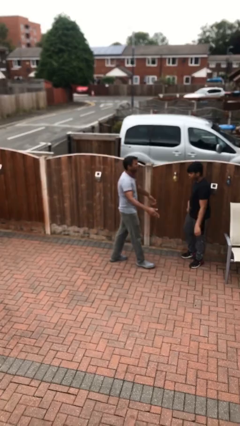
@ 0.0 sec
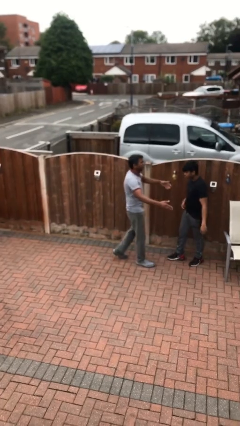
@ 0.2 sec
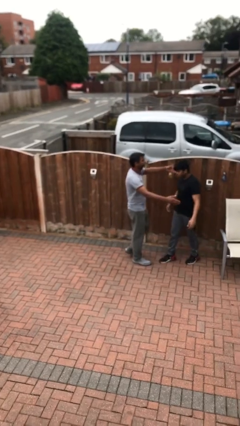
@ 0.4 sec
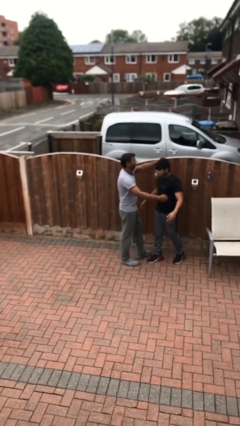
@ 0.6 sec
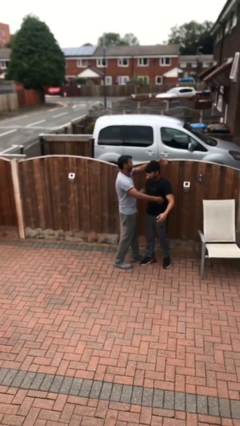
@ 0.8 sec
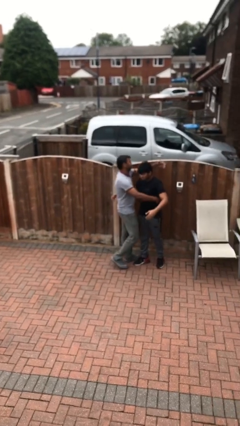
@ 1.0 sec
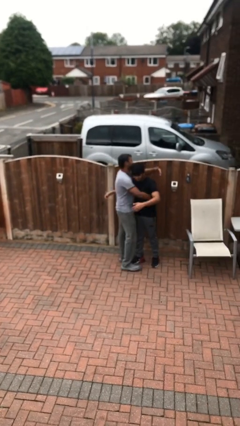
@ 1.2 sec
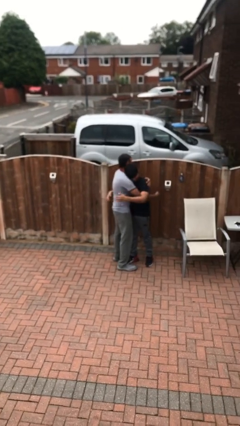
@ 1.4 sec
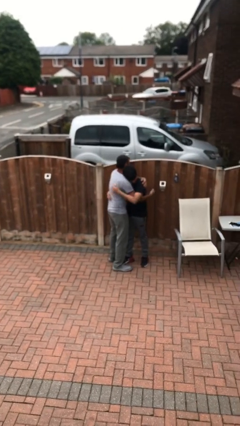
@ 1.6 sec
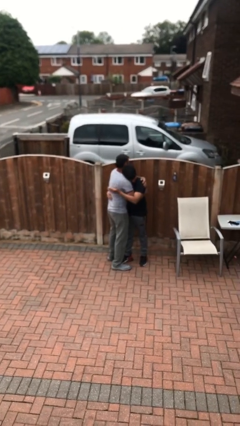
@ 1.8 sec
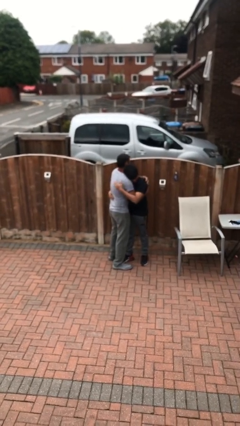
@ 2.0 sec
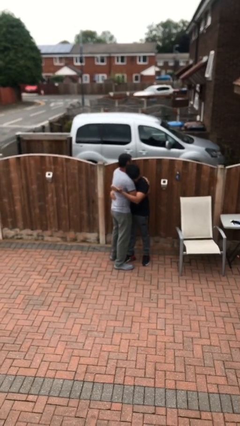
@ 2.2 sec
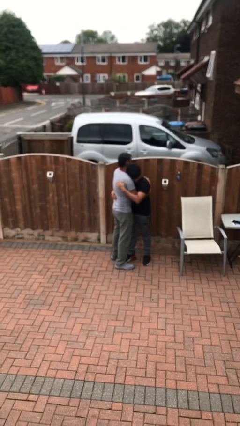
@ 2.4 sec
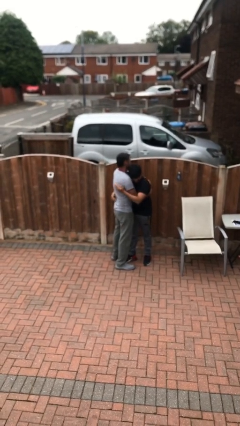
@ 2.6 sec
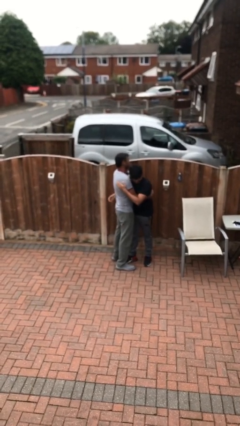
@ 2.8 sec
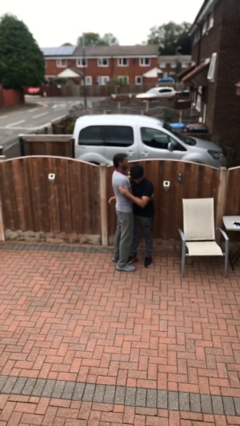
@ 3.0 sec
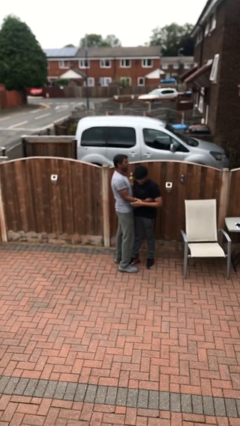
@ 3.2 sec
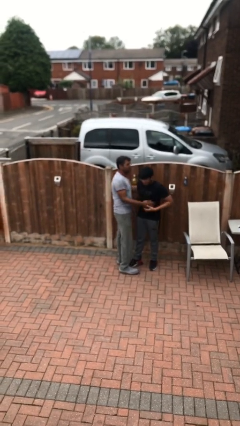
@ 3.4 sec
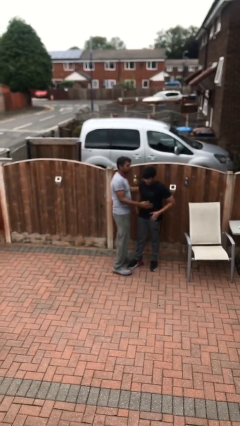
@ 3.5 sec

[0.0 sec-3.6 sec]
person embraces person

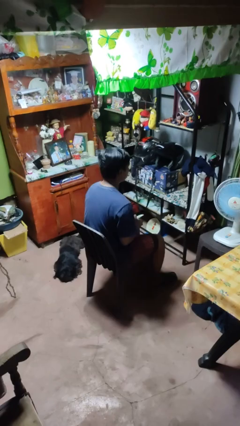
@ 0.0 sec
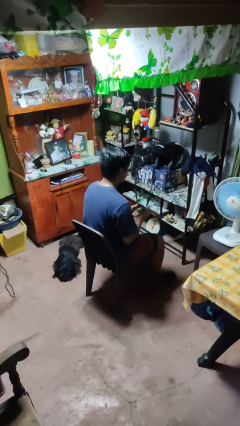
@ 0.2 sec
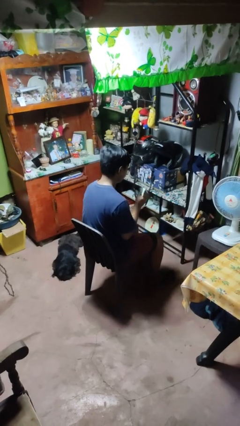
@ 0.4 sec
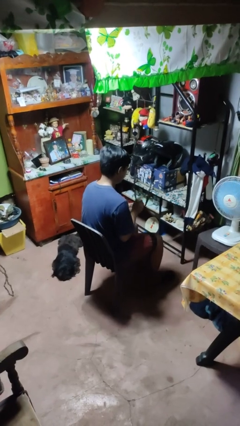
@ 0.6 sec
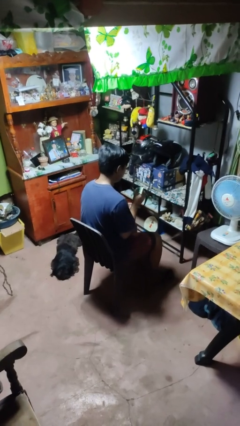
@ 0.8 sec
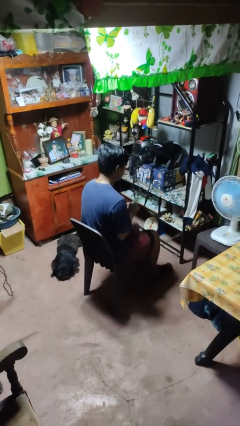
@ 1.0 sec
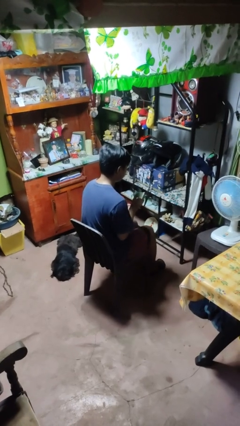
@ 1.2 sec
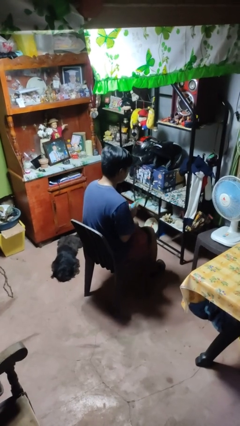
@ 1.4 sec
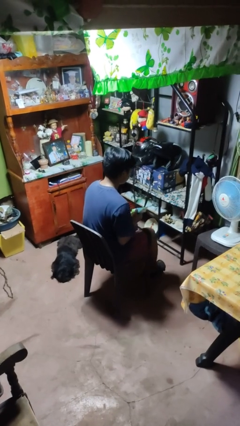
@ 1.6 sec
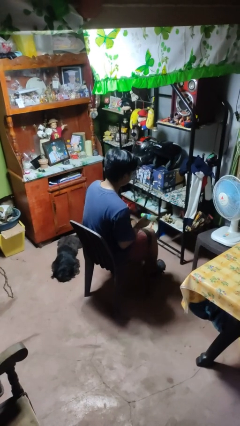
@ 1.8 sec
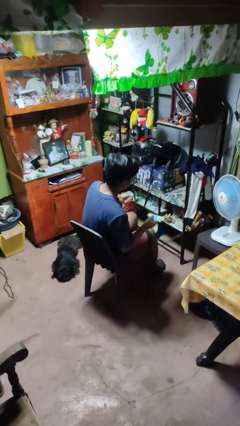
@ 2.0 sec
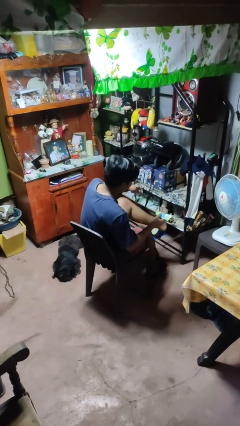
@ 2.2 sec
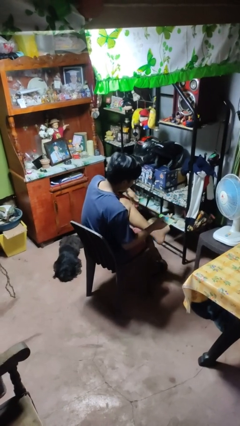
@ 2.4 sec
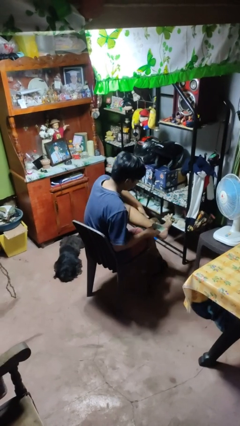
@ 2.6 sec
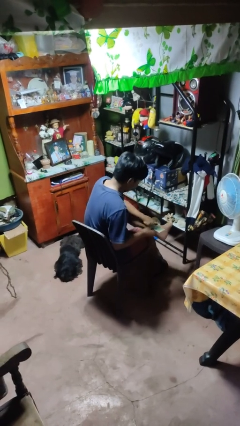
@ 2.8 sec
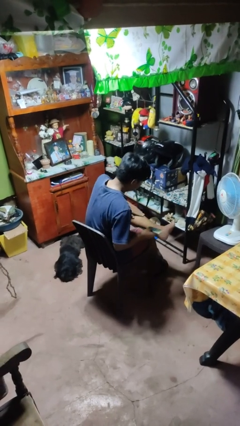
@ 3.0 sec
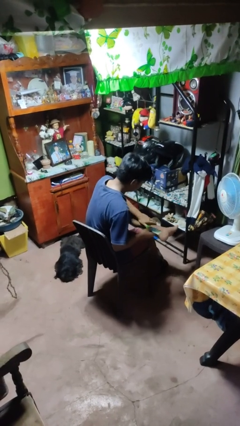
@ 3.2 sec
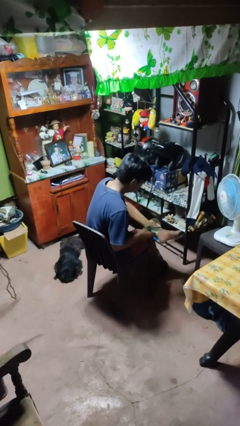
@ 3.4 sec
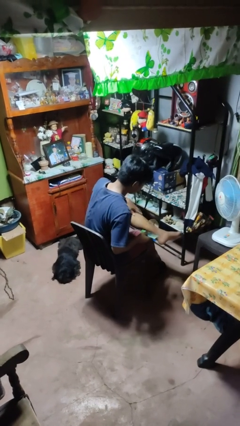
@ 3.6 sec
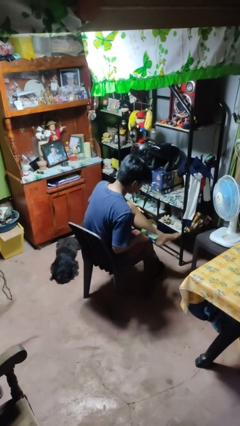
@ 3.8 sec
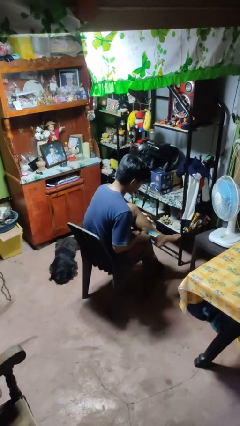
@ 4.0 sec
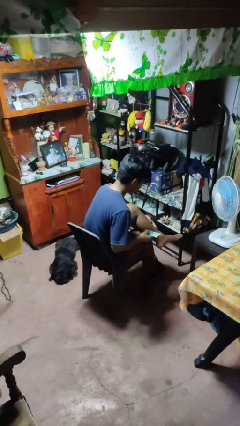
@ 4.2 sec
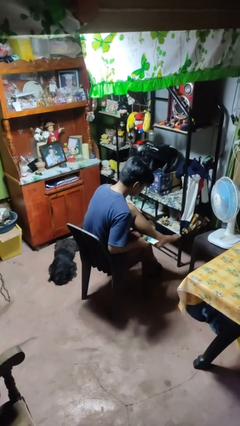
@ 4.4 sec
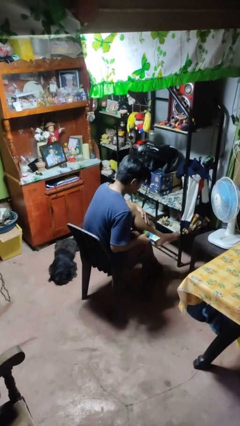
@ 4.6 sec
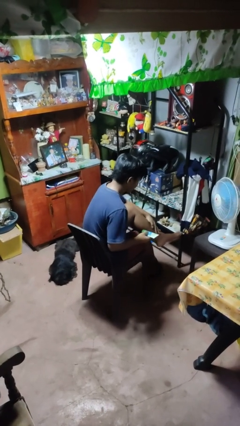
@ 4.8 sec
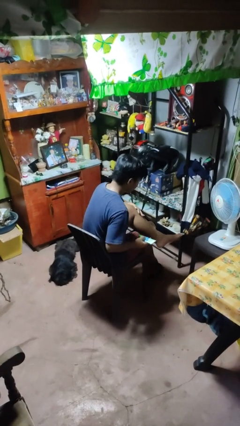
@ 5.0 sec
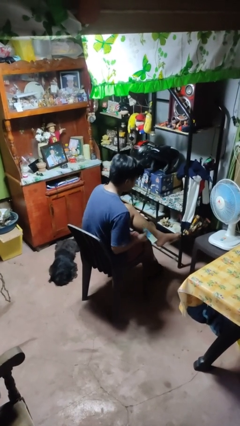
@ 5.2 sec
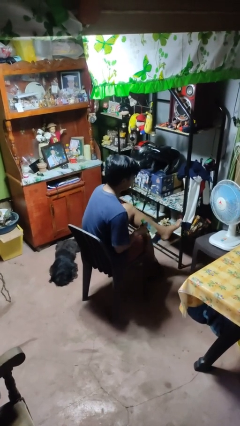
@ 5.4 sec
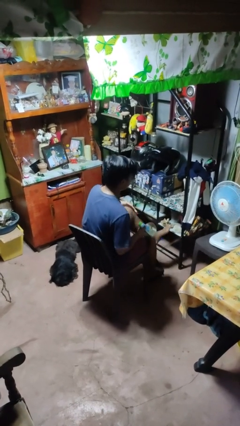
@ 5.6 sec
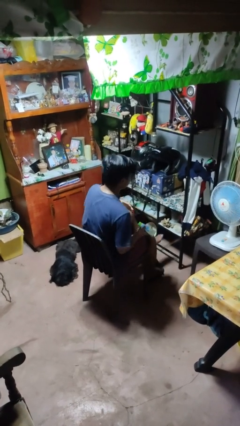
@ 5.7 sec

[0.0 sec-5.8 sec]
person applies sunscreen

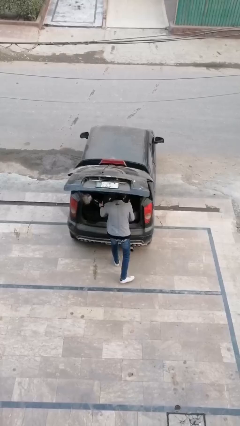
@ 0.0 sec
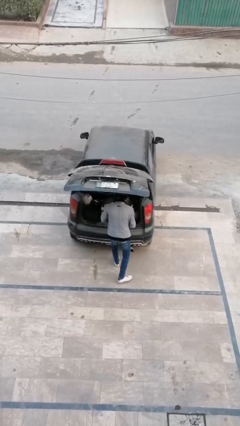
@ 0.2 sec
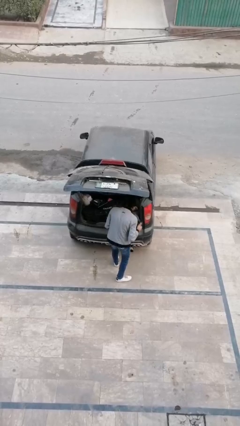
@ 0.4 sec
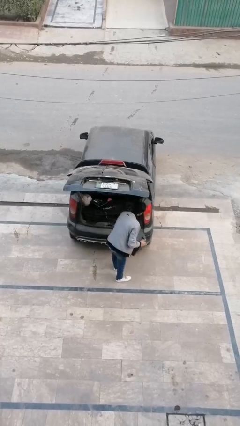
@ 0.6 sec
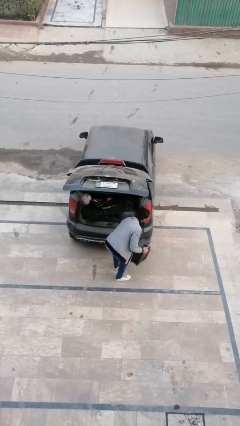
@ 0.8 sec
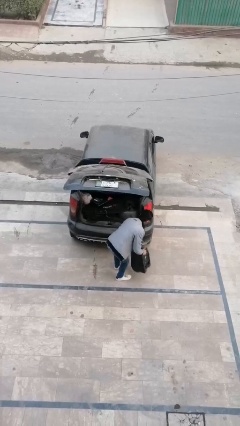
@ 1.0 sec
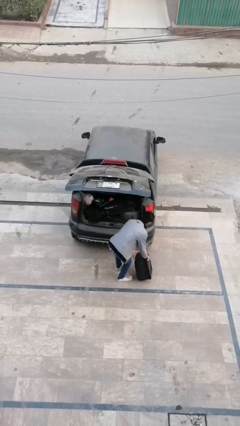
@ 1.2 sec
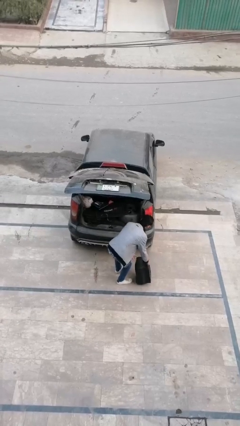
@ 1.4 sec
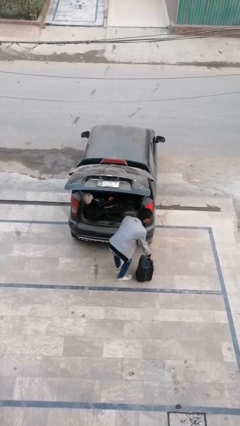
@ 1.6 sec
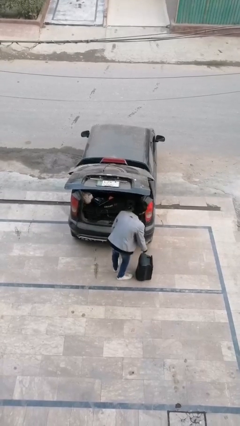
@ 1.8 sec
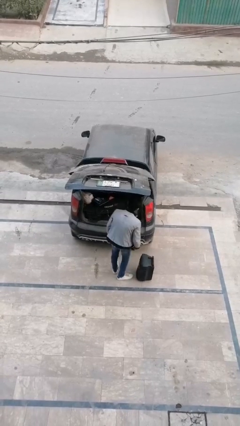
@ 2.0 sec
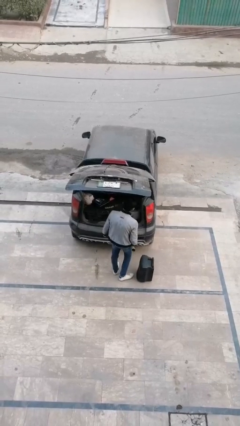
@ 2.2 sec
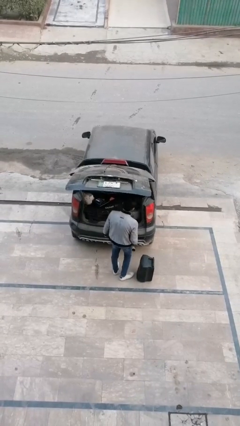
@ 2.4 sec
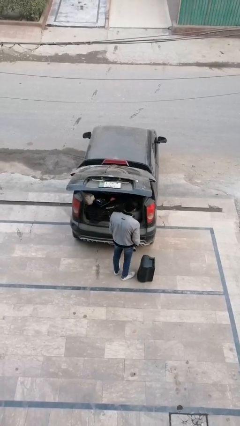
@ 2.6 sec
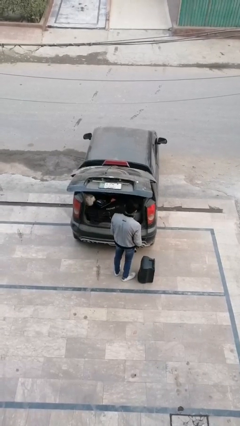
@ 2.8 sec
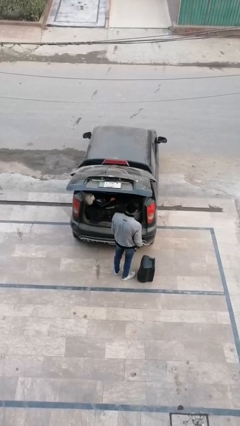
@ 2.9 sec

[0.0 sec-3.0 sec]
person unloads car

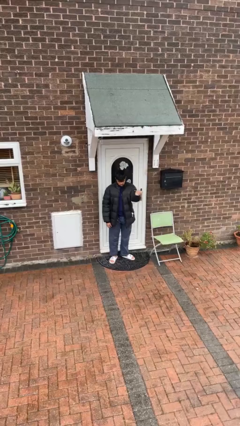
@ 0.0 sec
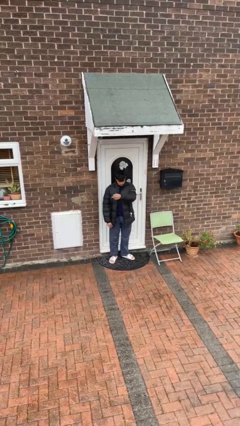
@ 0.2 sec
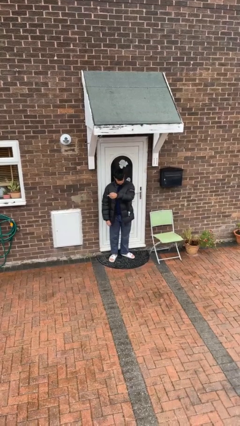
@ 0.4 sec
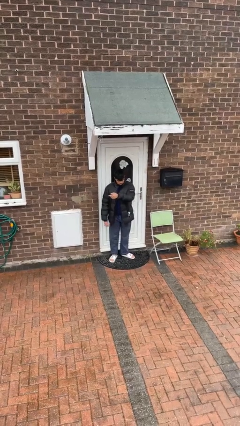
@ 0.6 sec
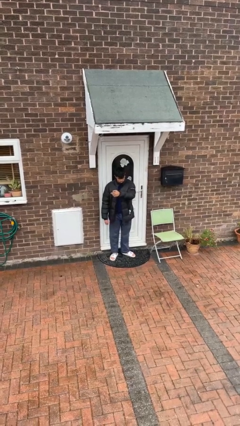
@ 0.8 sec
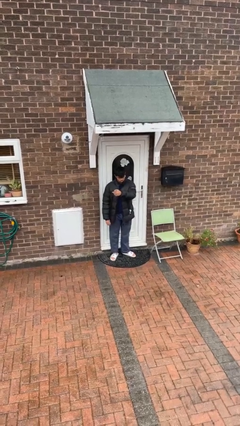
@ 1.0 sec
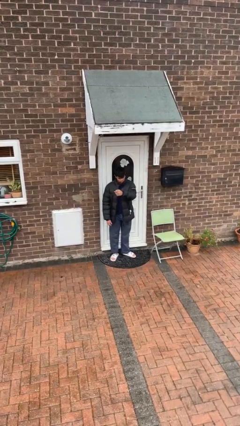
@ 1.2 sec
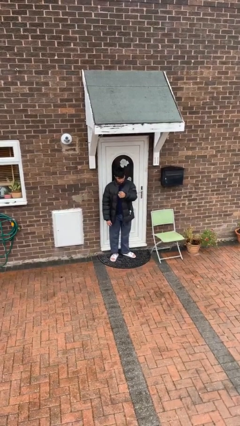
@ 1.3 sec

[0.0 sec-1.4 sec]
person gestures swipe right

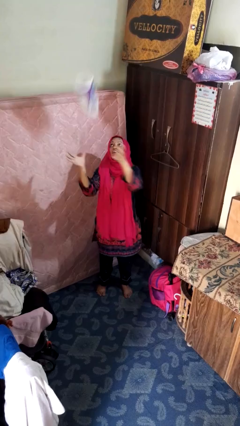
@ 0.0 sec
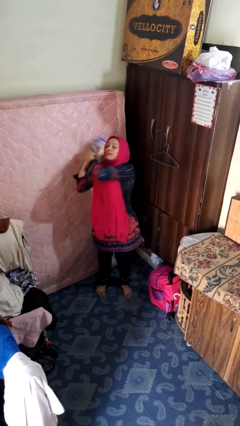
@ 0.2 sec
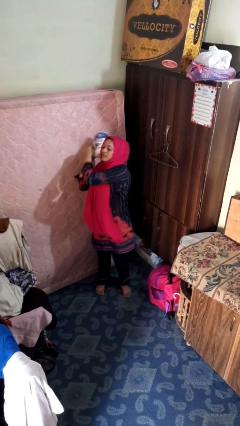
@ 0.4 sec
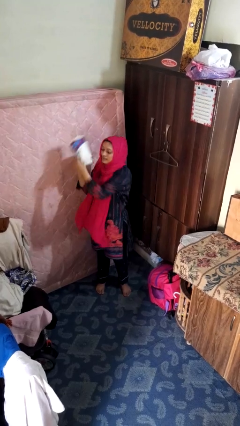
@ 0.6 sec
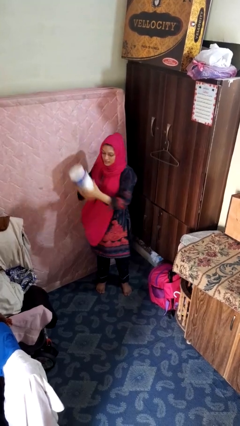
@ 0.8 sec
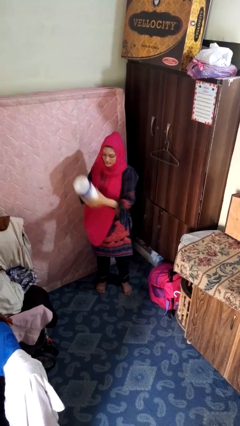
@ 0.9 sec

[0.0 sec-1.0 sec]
person catches dropped object

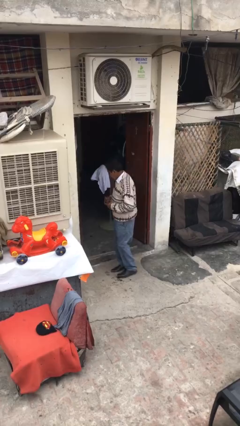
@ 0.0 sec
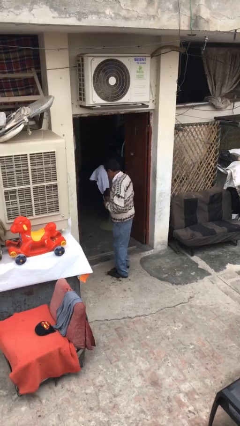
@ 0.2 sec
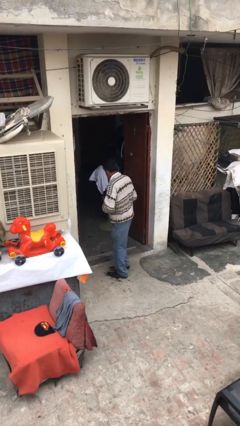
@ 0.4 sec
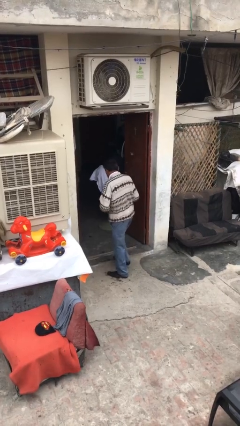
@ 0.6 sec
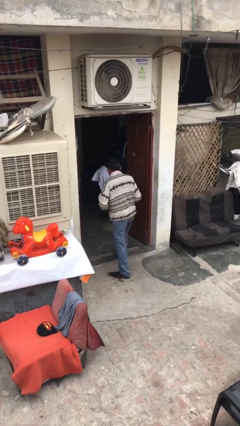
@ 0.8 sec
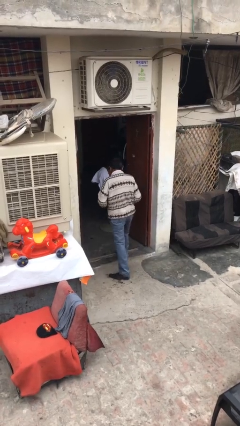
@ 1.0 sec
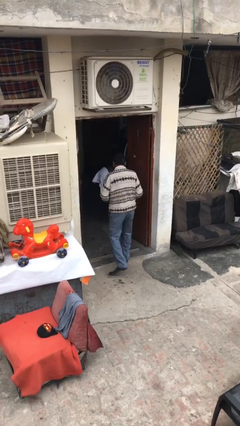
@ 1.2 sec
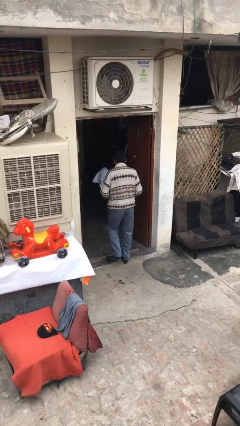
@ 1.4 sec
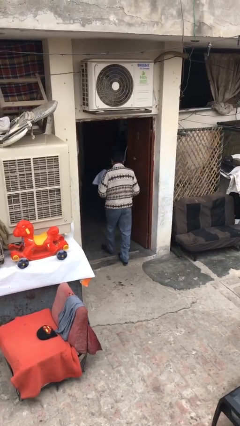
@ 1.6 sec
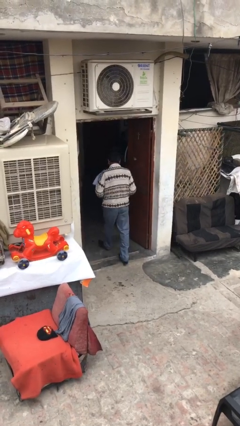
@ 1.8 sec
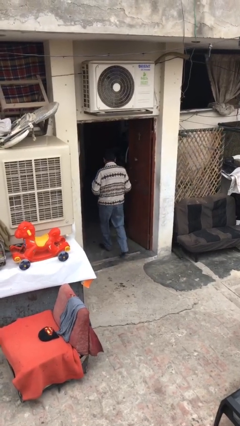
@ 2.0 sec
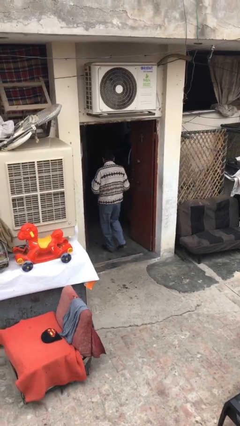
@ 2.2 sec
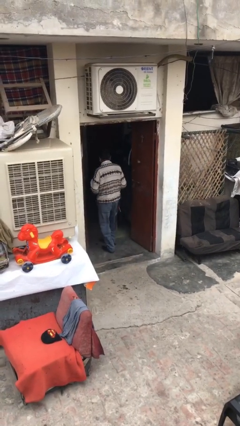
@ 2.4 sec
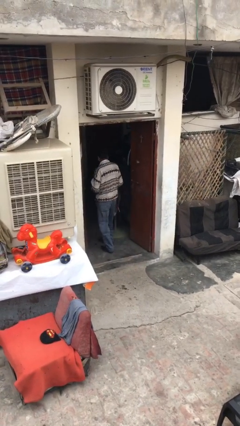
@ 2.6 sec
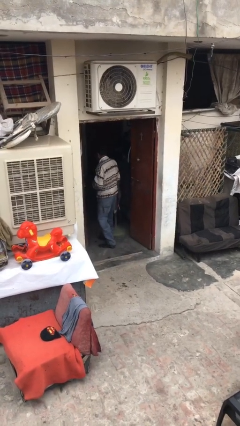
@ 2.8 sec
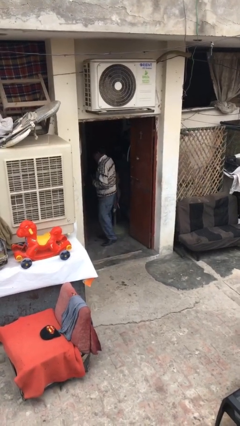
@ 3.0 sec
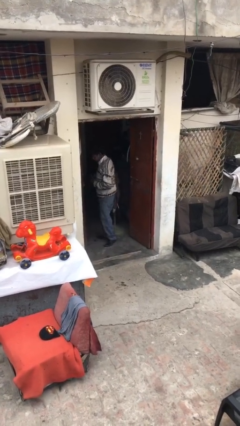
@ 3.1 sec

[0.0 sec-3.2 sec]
person exits scene through structure
